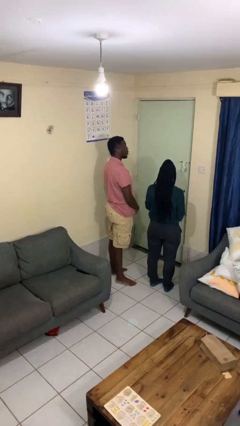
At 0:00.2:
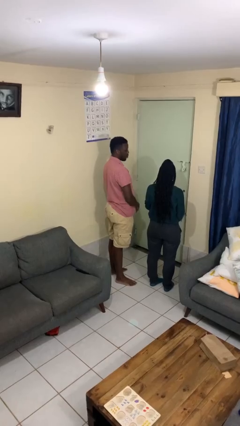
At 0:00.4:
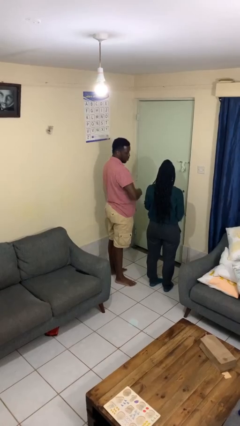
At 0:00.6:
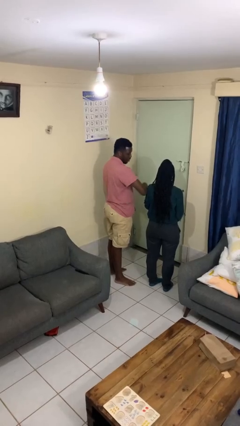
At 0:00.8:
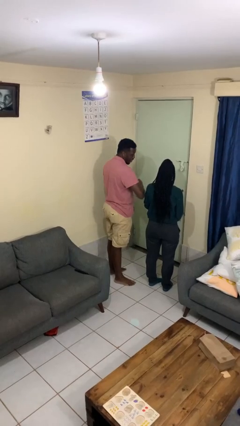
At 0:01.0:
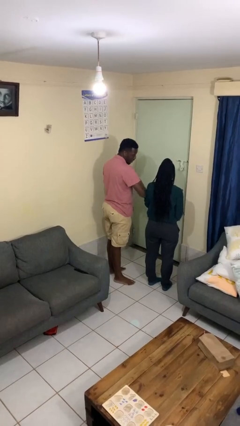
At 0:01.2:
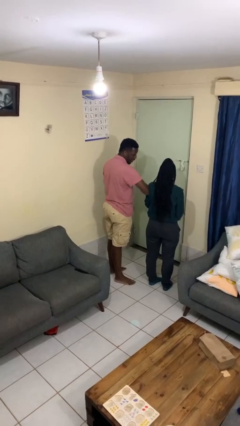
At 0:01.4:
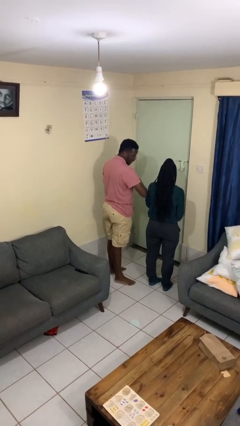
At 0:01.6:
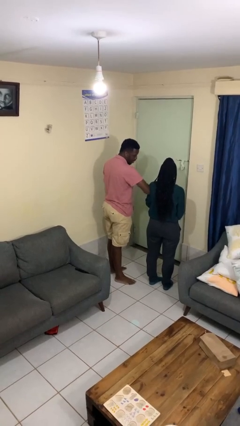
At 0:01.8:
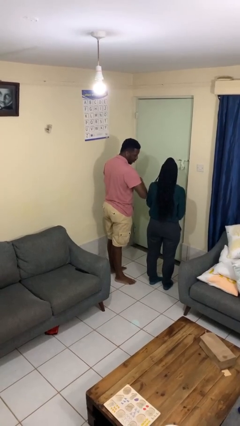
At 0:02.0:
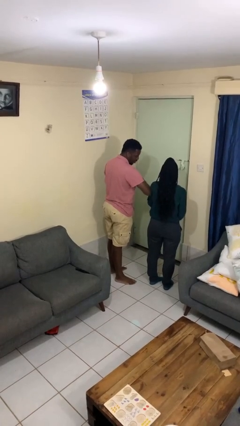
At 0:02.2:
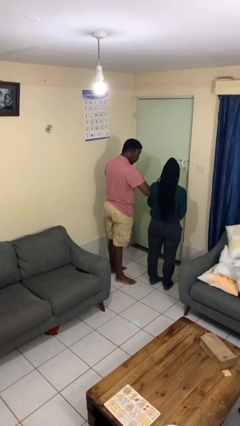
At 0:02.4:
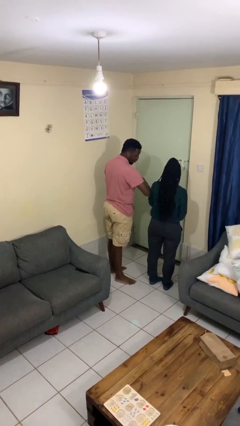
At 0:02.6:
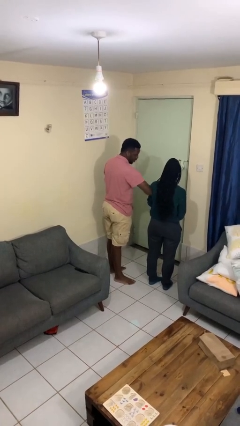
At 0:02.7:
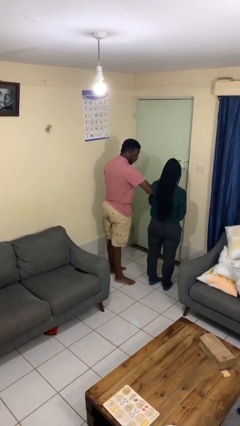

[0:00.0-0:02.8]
person nudges person with elbow

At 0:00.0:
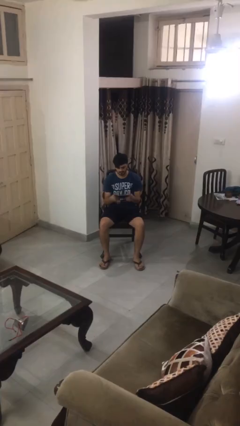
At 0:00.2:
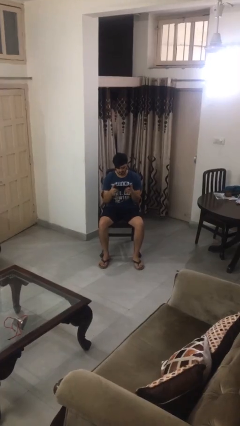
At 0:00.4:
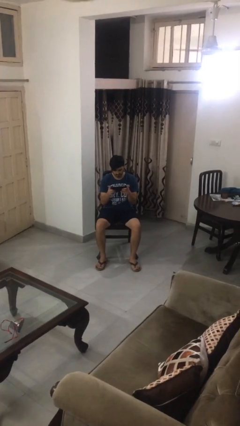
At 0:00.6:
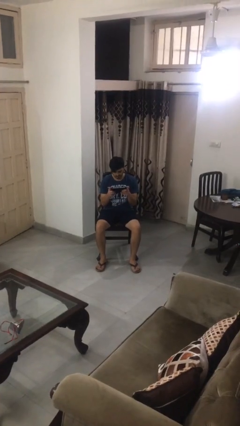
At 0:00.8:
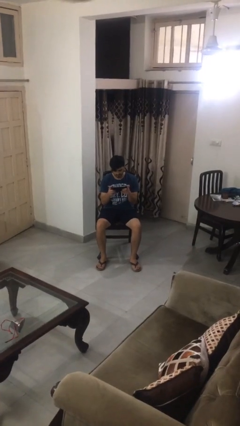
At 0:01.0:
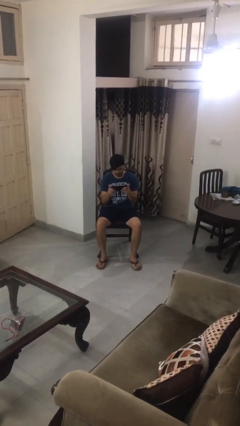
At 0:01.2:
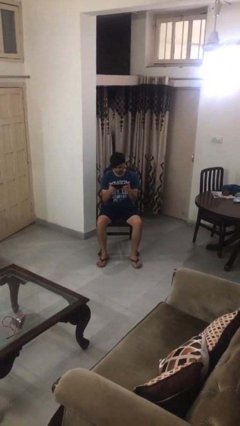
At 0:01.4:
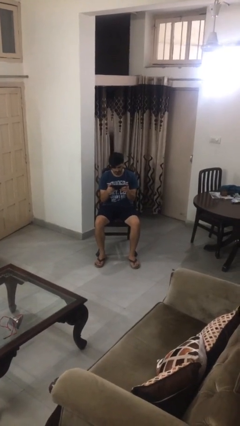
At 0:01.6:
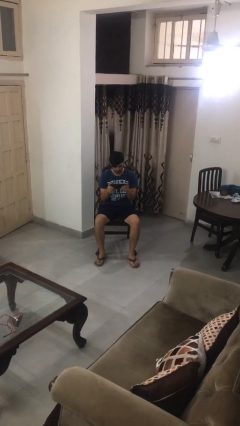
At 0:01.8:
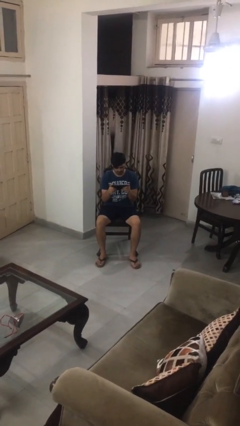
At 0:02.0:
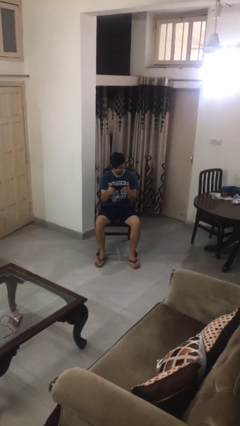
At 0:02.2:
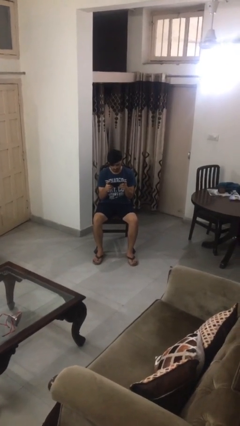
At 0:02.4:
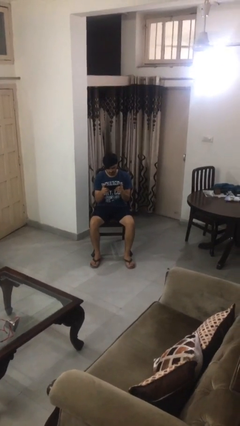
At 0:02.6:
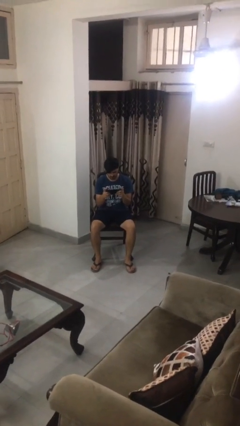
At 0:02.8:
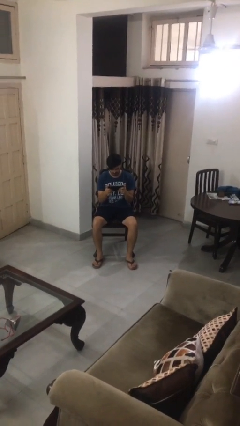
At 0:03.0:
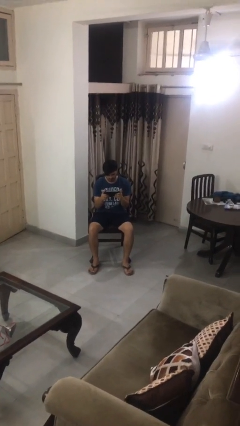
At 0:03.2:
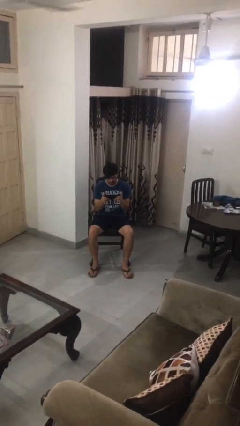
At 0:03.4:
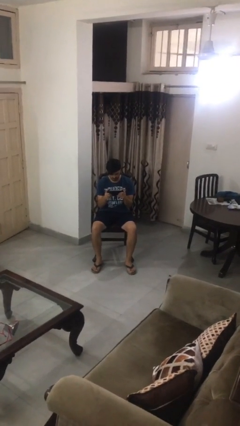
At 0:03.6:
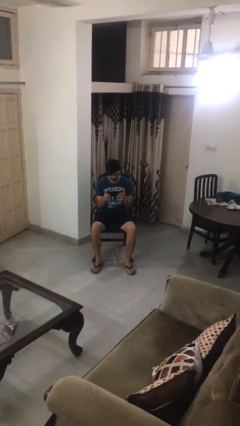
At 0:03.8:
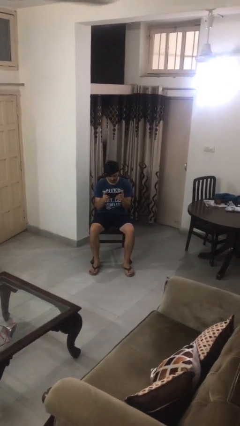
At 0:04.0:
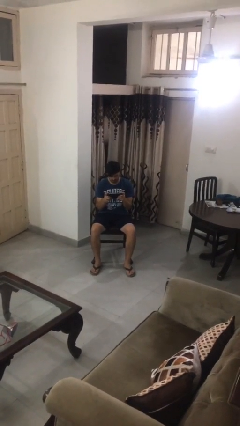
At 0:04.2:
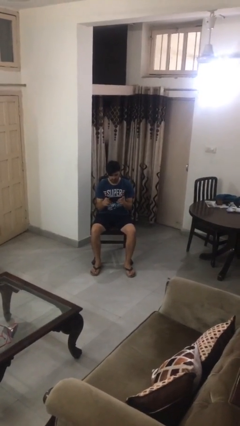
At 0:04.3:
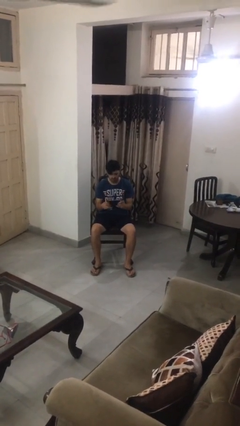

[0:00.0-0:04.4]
person interacts with handheld game

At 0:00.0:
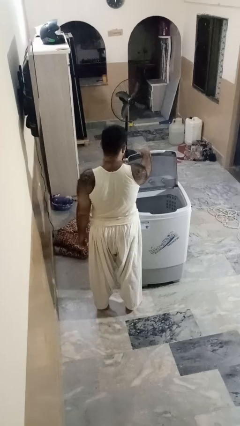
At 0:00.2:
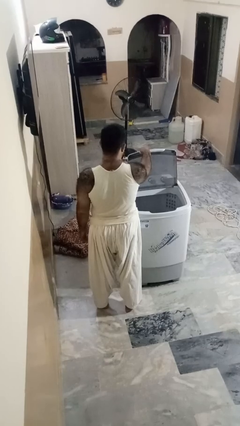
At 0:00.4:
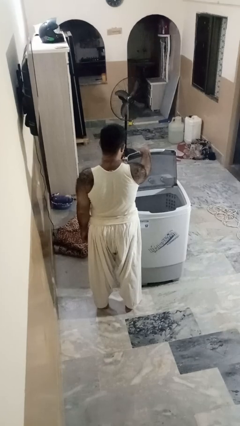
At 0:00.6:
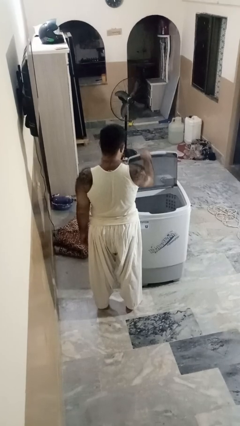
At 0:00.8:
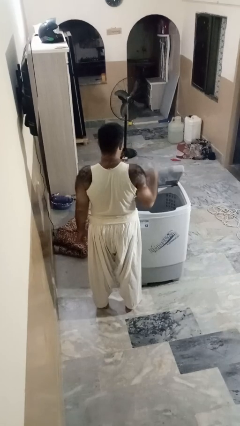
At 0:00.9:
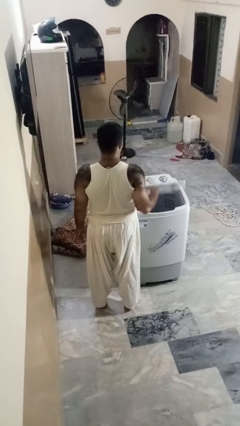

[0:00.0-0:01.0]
person closes clothes washer

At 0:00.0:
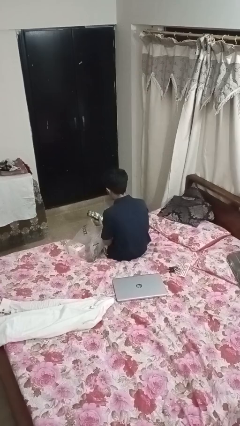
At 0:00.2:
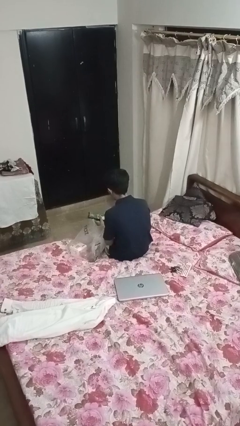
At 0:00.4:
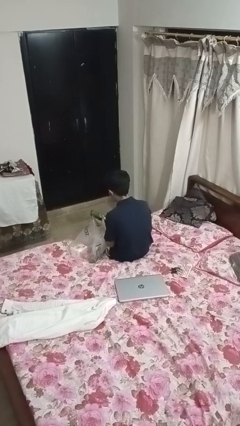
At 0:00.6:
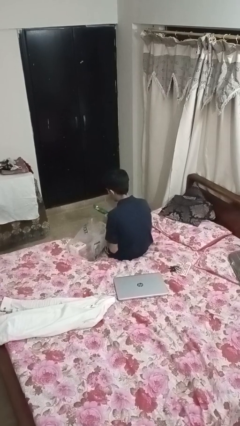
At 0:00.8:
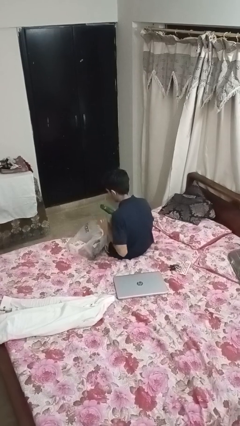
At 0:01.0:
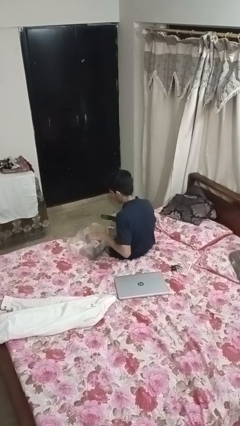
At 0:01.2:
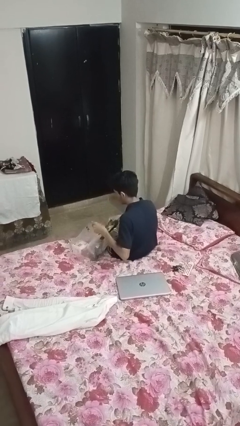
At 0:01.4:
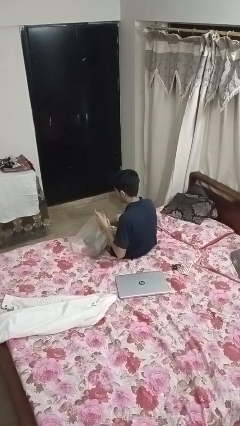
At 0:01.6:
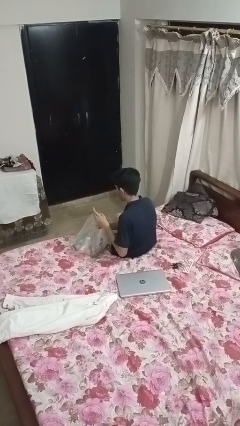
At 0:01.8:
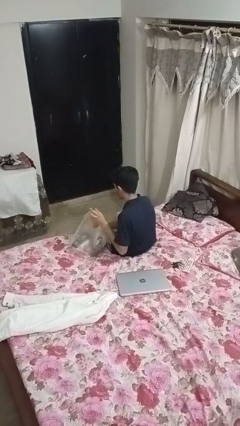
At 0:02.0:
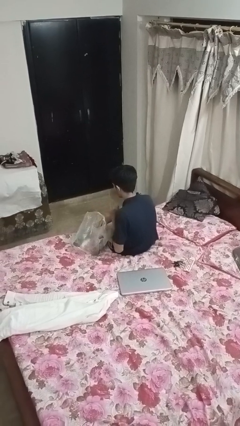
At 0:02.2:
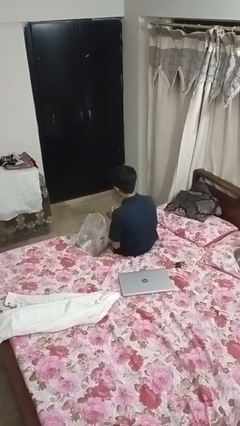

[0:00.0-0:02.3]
person puts object into bag

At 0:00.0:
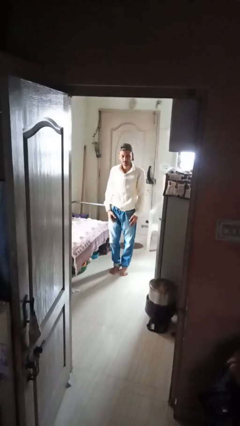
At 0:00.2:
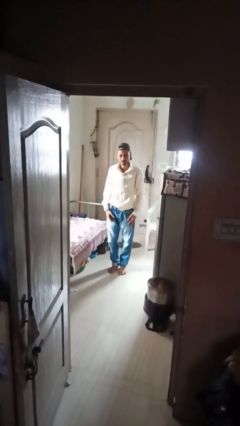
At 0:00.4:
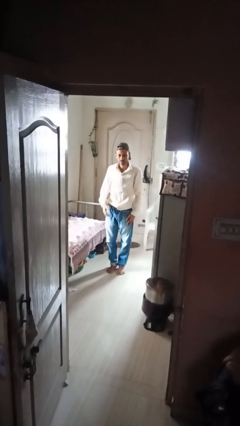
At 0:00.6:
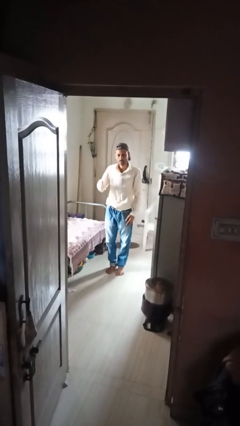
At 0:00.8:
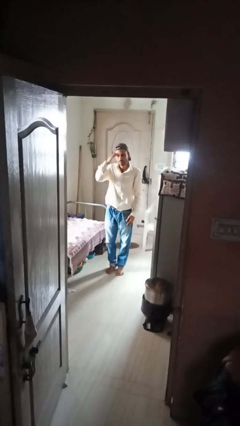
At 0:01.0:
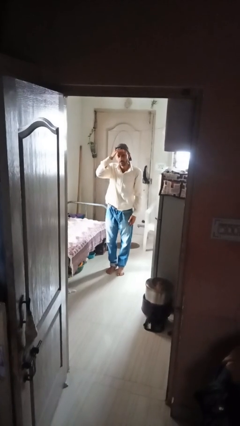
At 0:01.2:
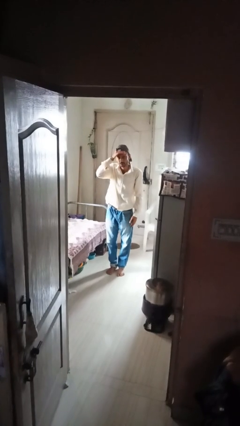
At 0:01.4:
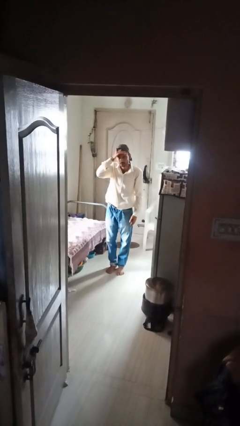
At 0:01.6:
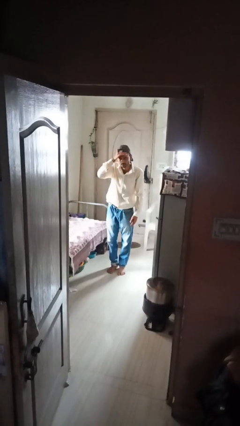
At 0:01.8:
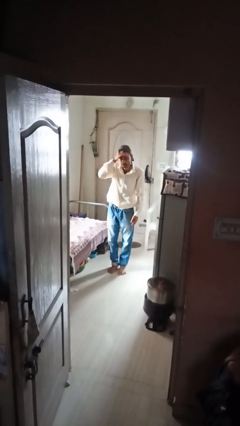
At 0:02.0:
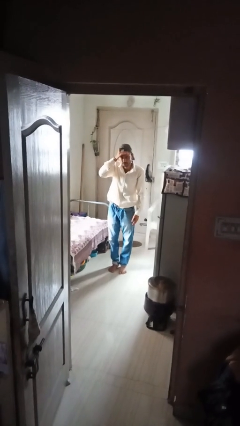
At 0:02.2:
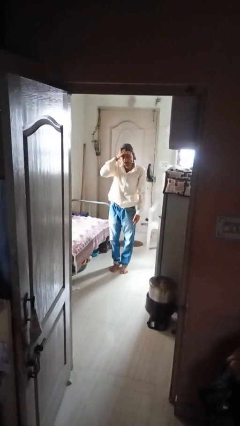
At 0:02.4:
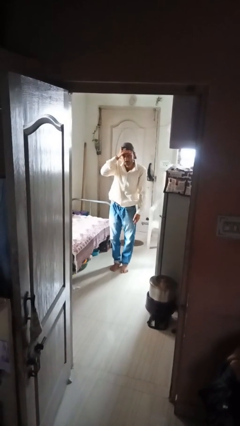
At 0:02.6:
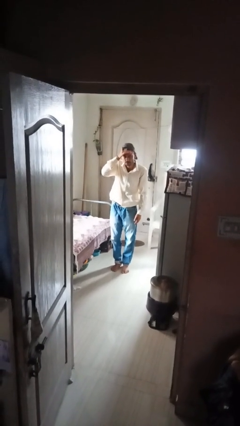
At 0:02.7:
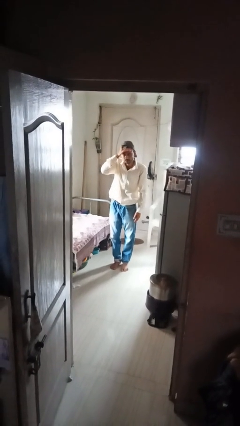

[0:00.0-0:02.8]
person shades eyes

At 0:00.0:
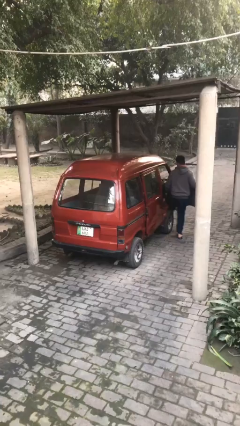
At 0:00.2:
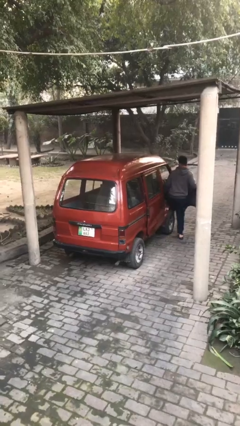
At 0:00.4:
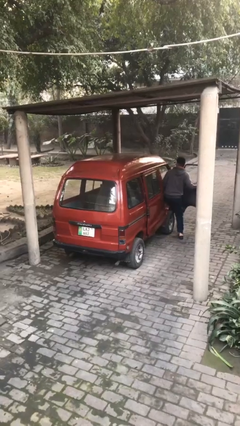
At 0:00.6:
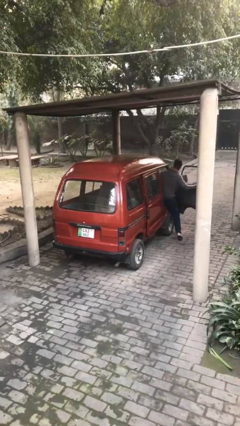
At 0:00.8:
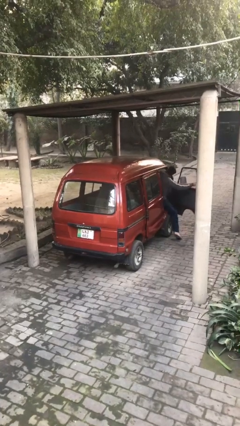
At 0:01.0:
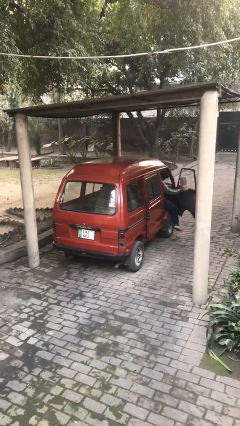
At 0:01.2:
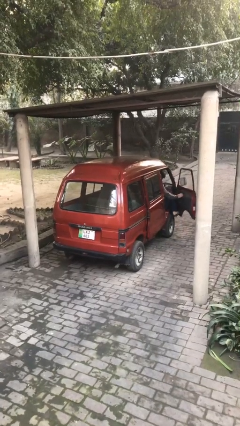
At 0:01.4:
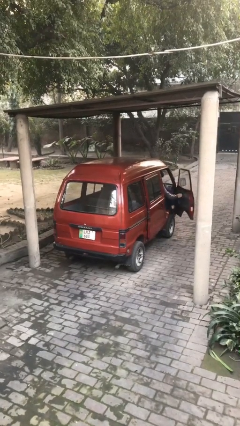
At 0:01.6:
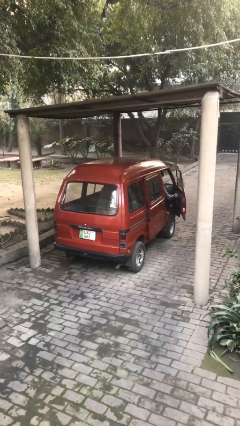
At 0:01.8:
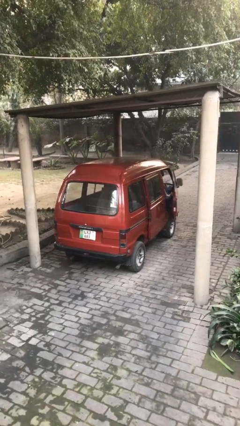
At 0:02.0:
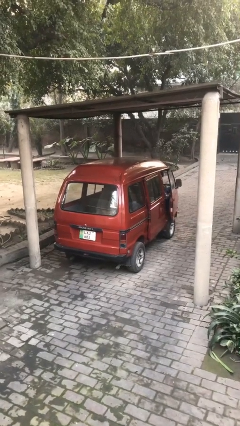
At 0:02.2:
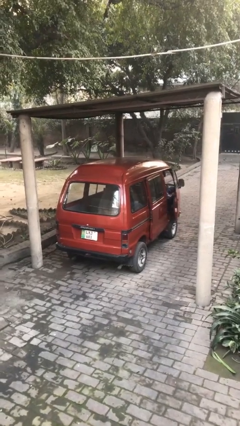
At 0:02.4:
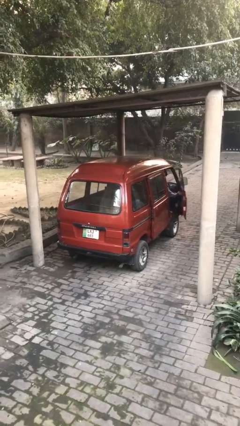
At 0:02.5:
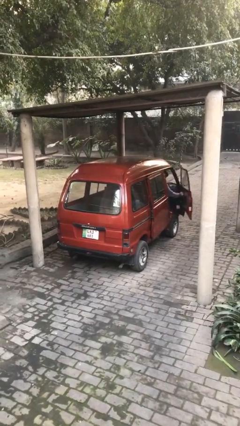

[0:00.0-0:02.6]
car picks up person

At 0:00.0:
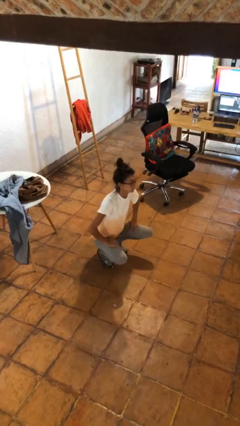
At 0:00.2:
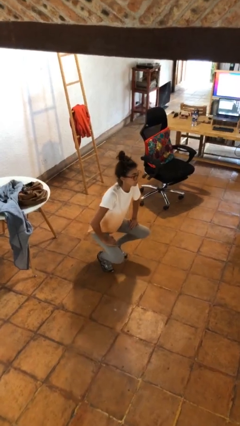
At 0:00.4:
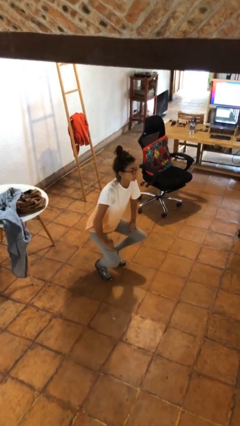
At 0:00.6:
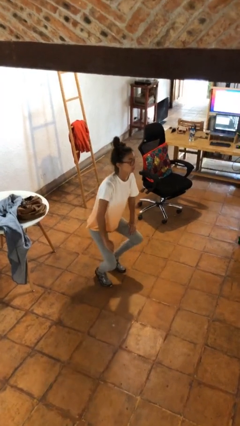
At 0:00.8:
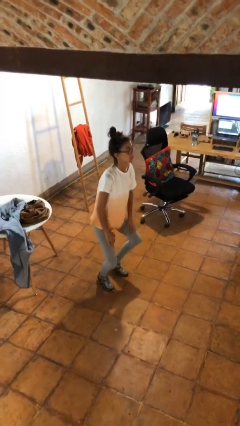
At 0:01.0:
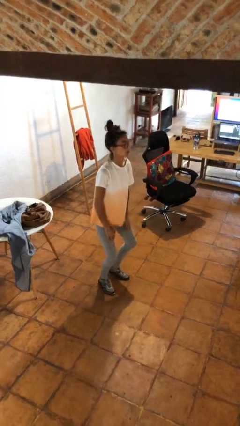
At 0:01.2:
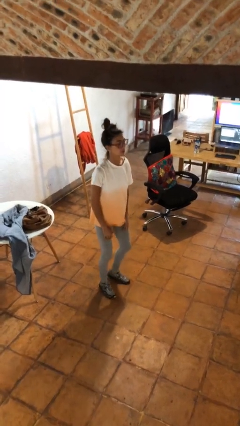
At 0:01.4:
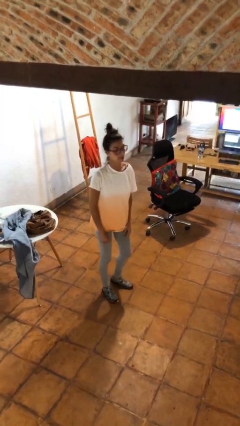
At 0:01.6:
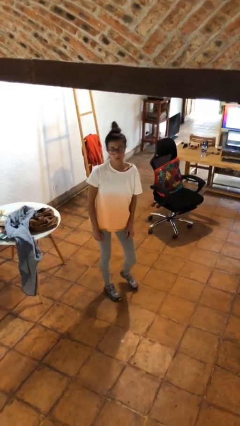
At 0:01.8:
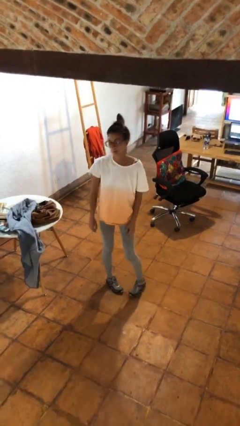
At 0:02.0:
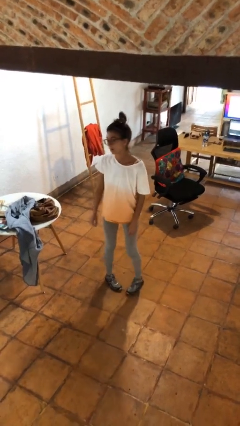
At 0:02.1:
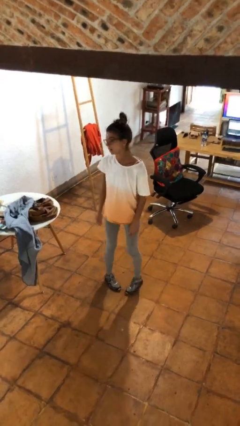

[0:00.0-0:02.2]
person stands up
